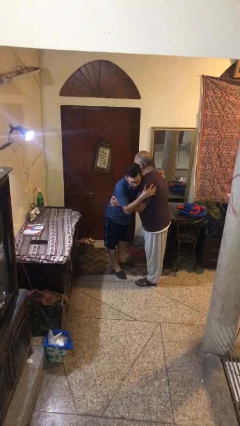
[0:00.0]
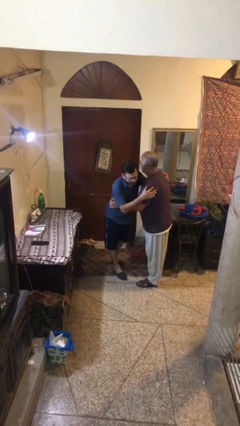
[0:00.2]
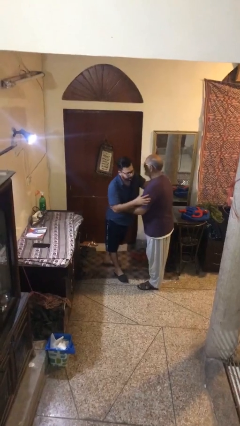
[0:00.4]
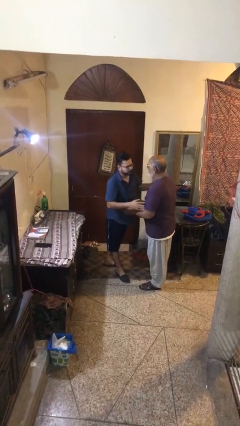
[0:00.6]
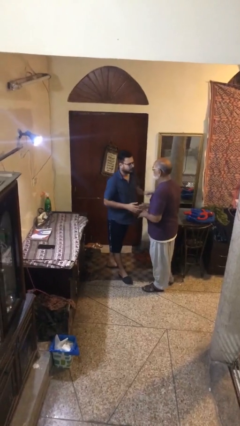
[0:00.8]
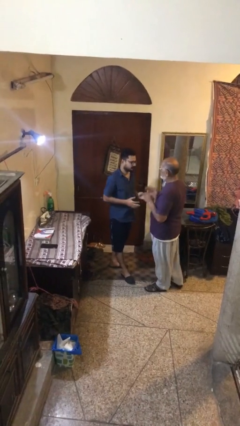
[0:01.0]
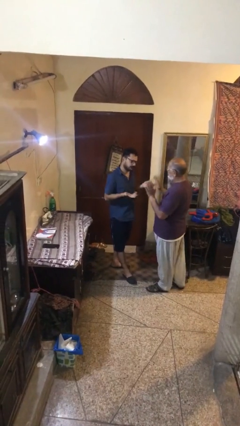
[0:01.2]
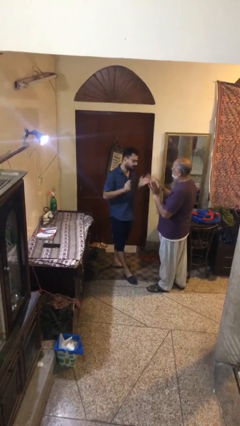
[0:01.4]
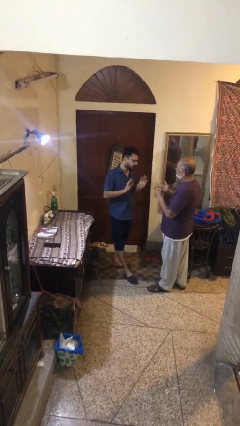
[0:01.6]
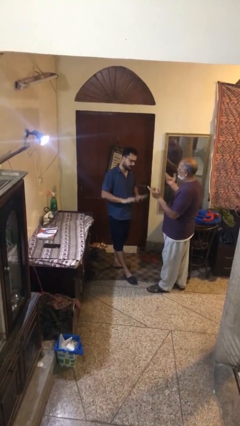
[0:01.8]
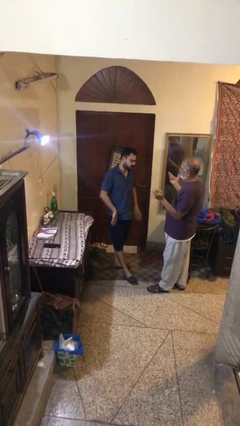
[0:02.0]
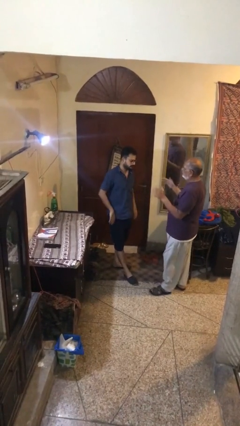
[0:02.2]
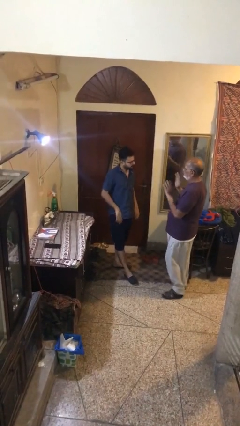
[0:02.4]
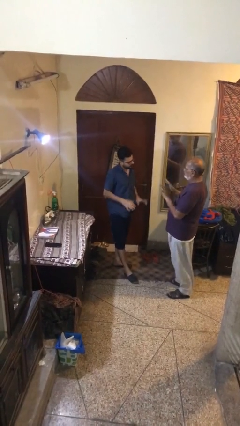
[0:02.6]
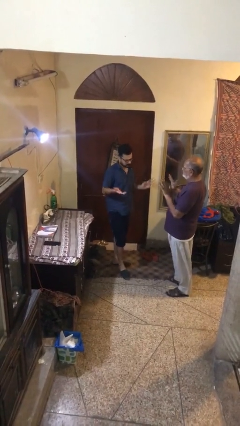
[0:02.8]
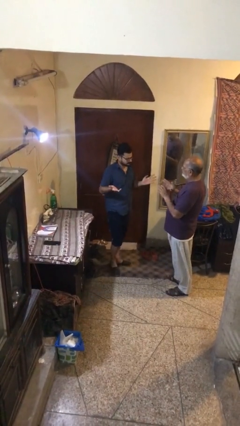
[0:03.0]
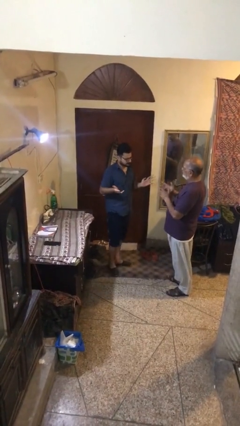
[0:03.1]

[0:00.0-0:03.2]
person talks to person

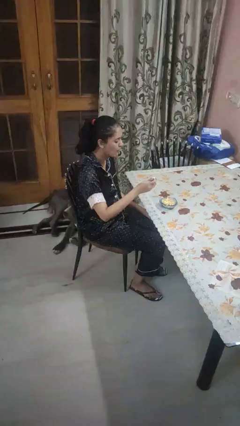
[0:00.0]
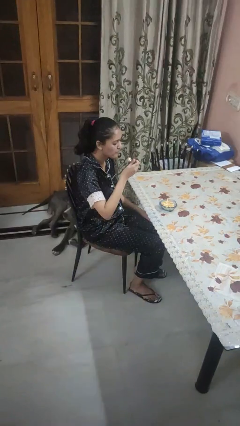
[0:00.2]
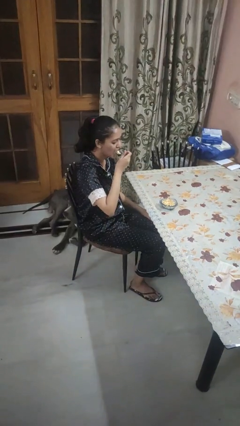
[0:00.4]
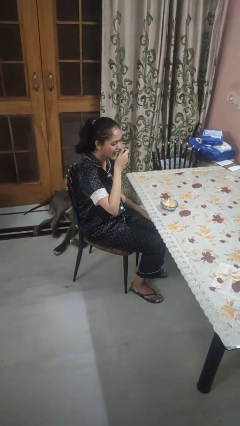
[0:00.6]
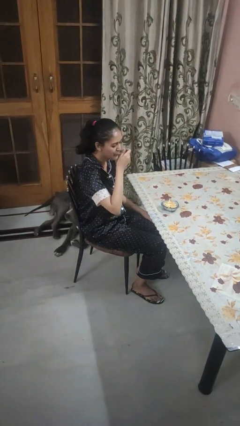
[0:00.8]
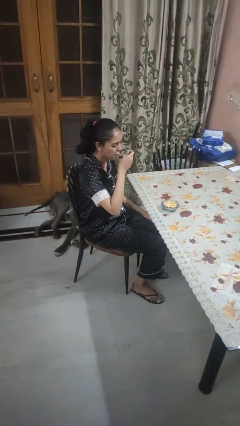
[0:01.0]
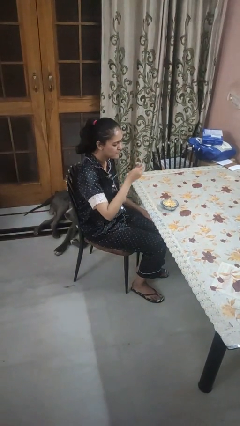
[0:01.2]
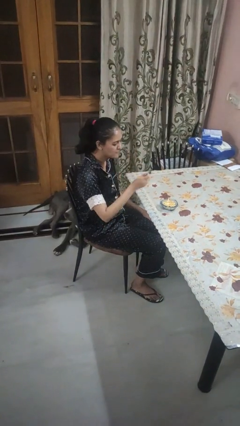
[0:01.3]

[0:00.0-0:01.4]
person eats with utensil

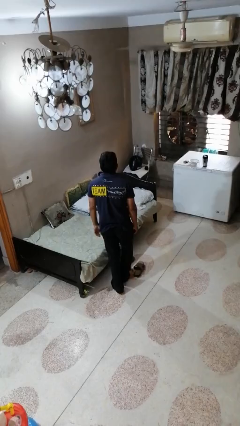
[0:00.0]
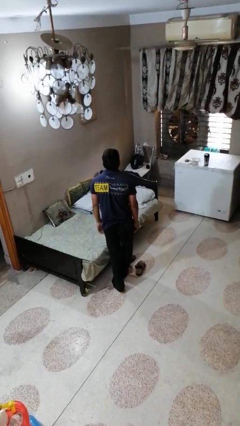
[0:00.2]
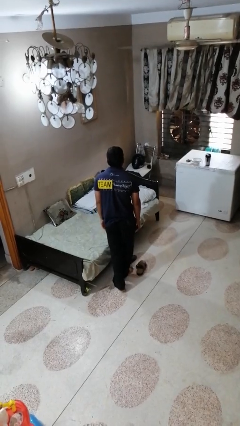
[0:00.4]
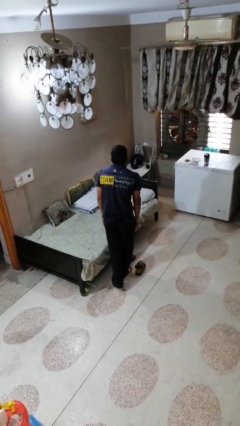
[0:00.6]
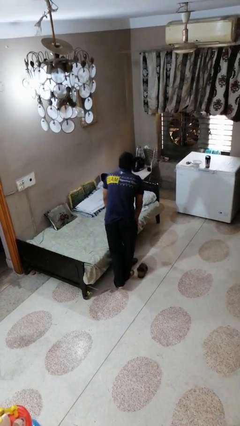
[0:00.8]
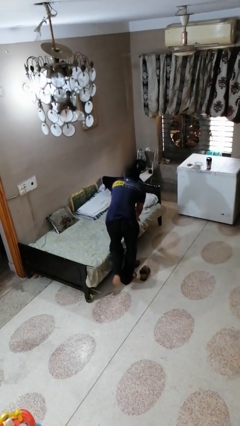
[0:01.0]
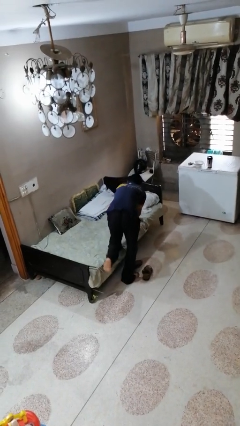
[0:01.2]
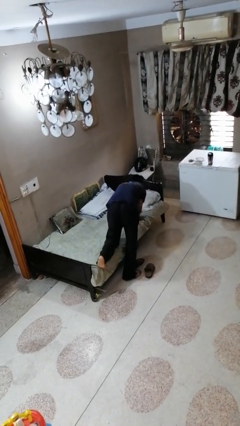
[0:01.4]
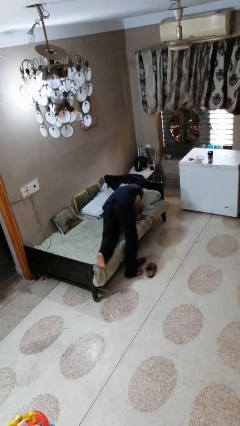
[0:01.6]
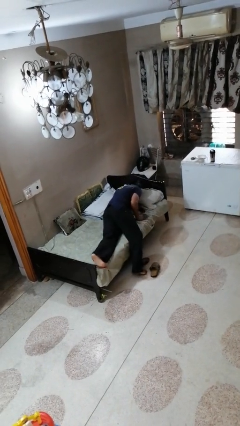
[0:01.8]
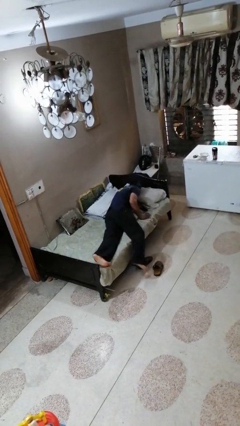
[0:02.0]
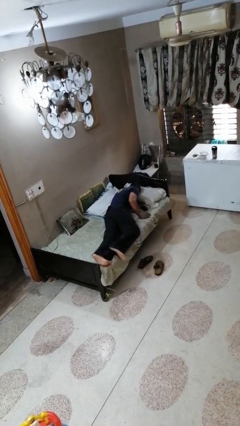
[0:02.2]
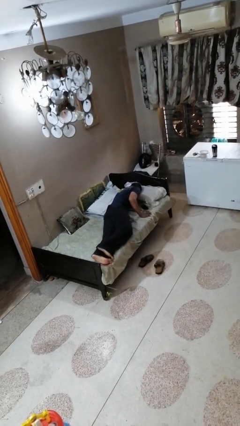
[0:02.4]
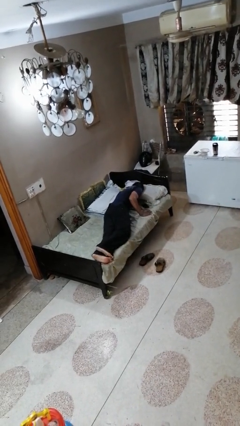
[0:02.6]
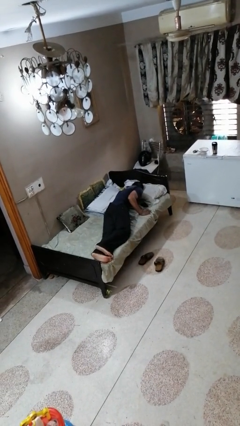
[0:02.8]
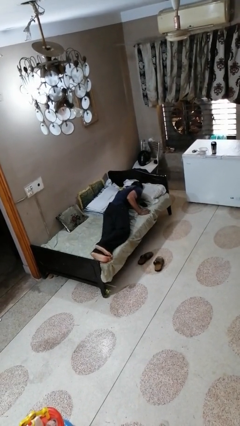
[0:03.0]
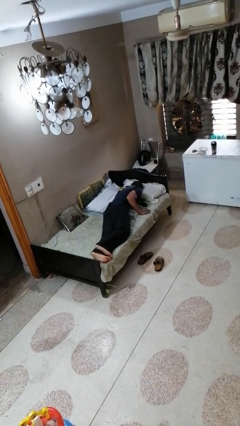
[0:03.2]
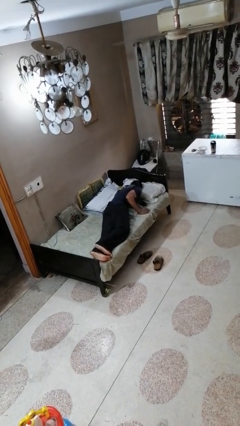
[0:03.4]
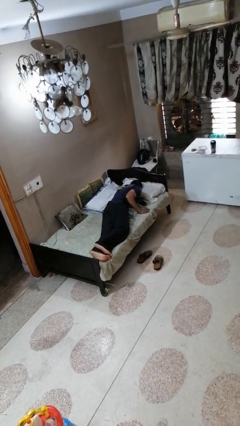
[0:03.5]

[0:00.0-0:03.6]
person lies down on bed

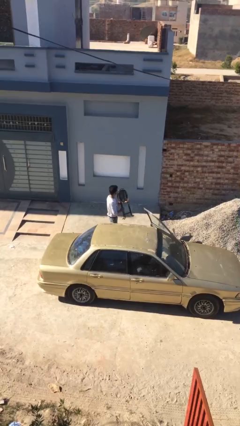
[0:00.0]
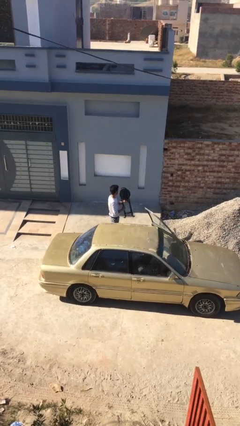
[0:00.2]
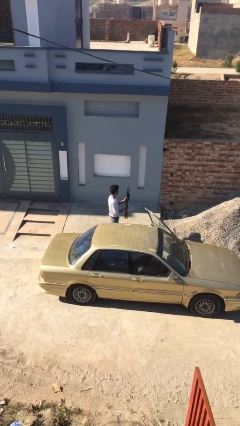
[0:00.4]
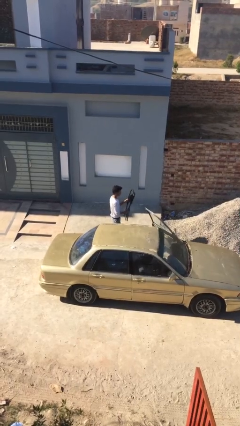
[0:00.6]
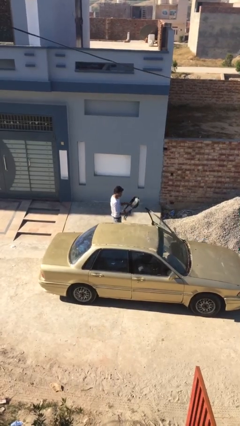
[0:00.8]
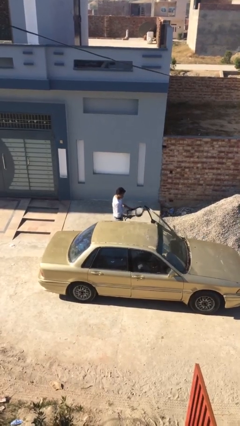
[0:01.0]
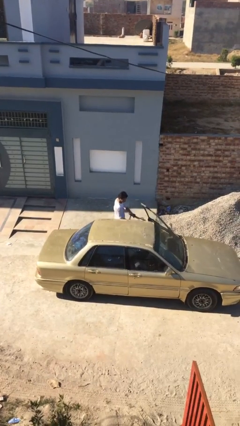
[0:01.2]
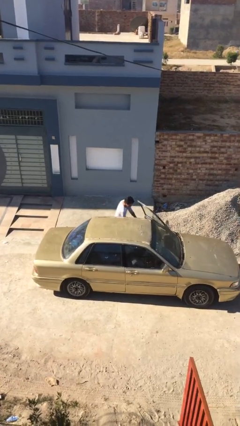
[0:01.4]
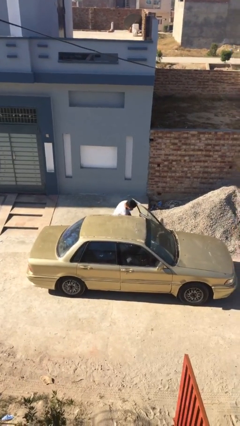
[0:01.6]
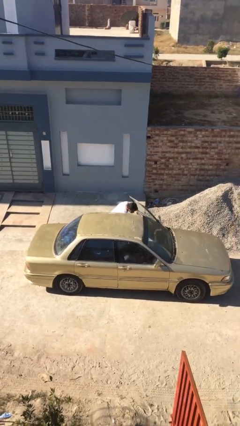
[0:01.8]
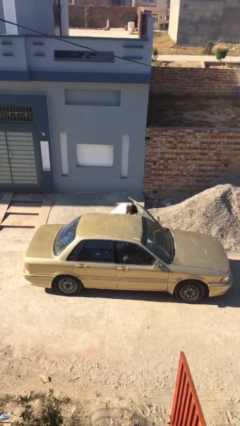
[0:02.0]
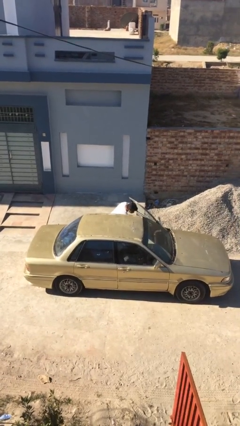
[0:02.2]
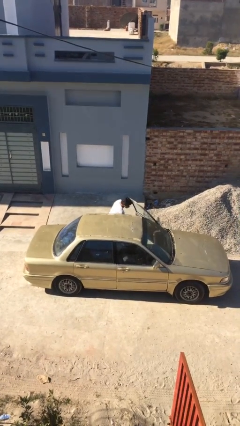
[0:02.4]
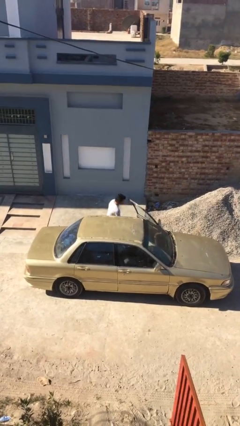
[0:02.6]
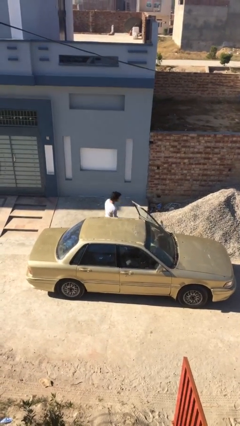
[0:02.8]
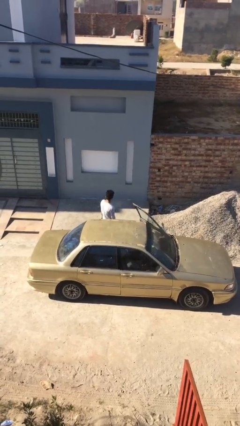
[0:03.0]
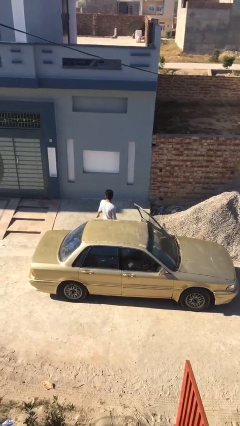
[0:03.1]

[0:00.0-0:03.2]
person loads car

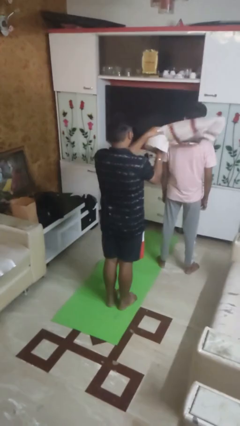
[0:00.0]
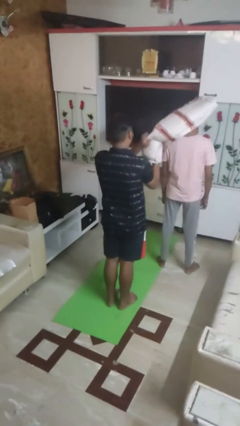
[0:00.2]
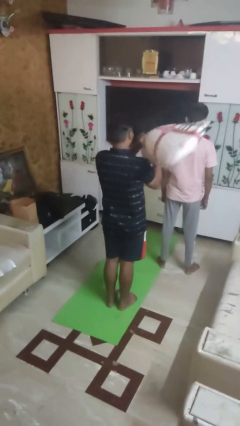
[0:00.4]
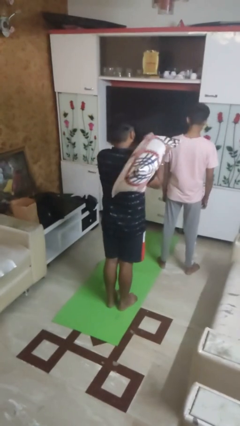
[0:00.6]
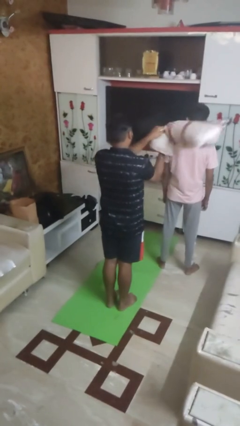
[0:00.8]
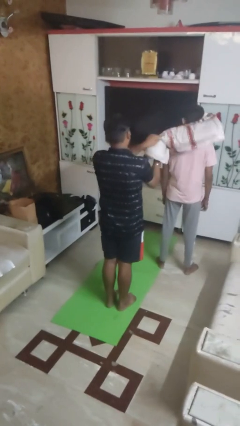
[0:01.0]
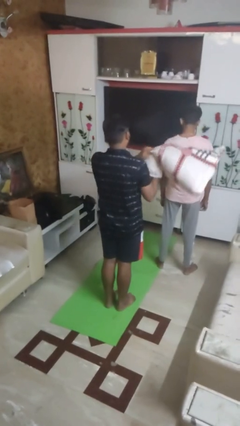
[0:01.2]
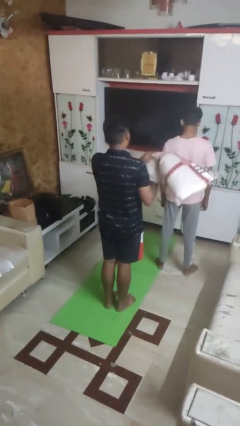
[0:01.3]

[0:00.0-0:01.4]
person hits person with pillow

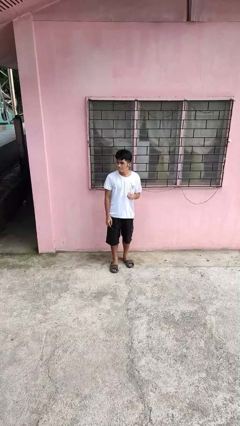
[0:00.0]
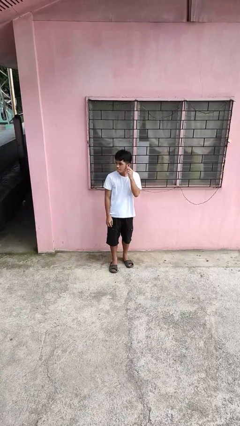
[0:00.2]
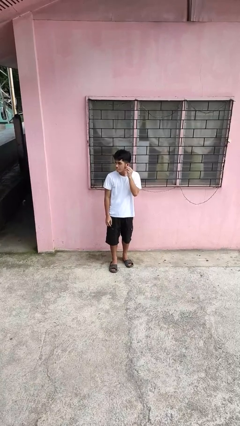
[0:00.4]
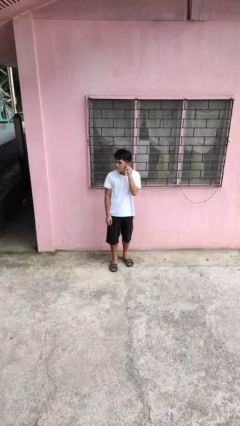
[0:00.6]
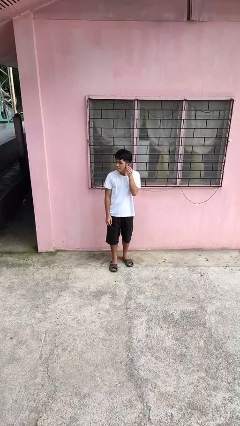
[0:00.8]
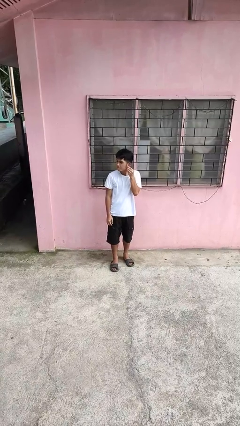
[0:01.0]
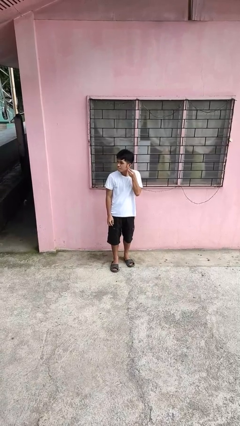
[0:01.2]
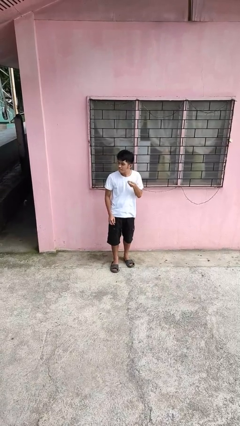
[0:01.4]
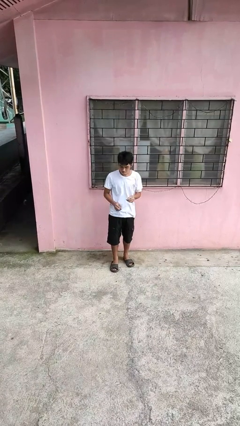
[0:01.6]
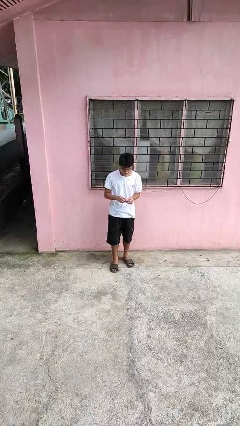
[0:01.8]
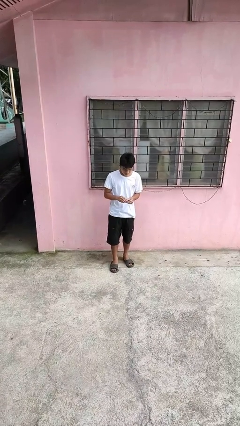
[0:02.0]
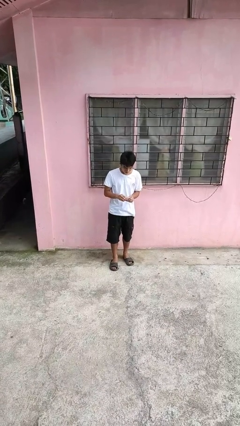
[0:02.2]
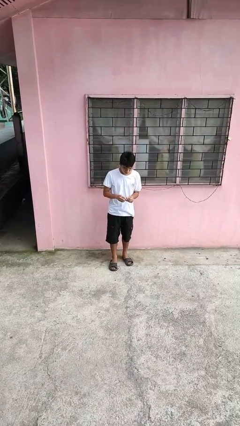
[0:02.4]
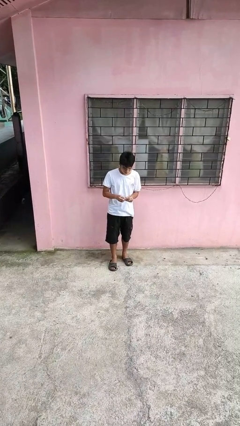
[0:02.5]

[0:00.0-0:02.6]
person takes off earrings

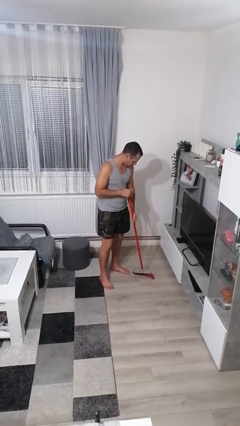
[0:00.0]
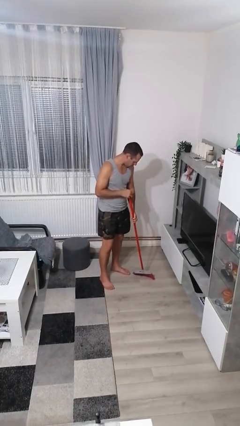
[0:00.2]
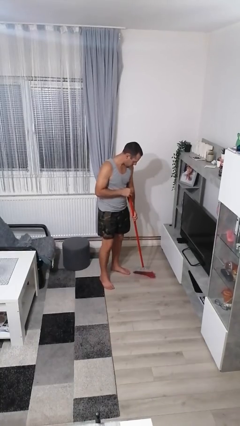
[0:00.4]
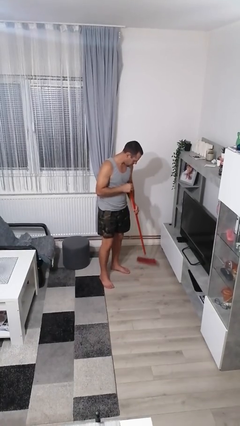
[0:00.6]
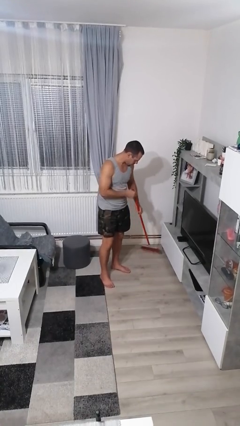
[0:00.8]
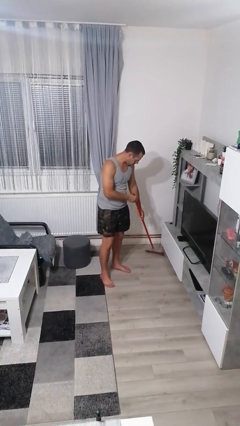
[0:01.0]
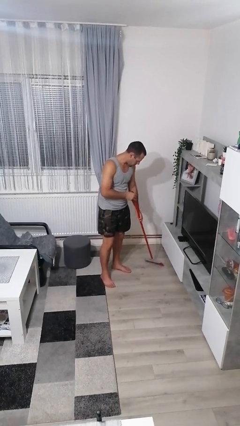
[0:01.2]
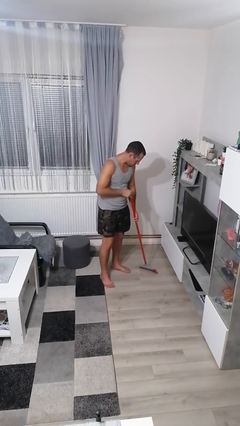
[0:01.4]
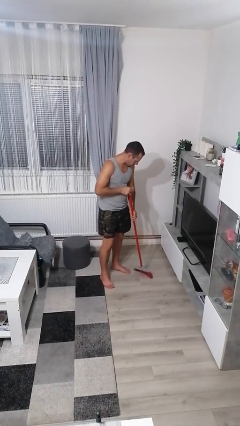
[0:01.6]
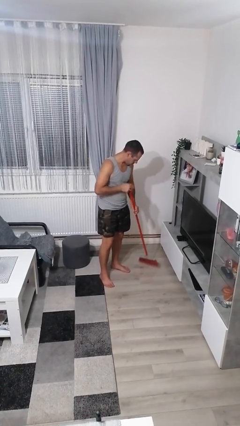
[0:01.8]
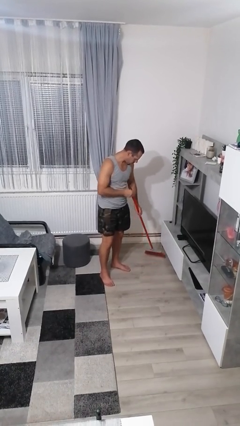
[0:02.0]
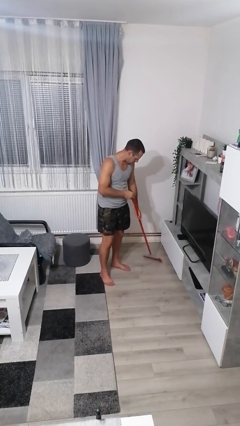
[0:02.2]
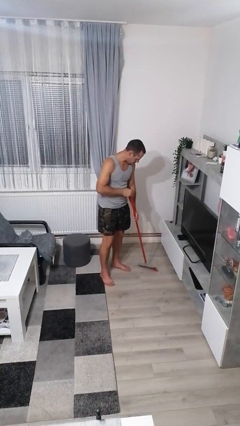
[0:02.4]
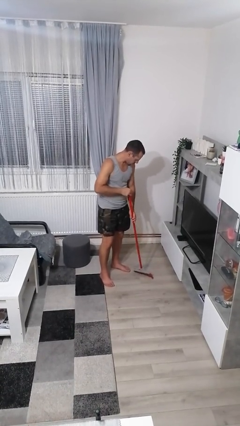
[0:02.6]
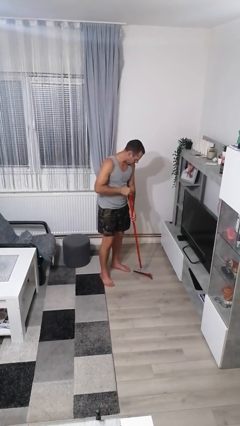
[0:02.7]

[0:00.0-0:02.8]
person sweeps floor
